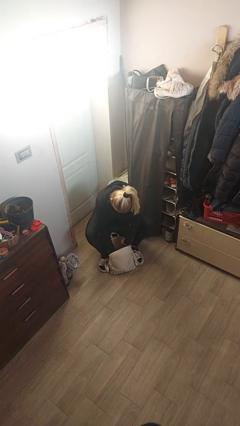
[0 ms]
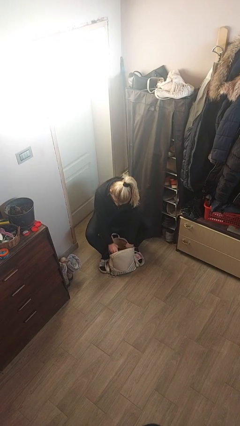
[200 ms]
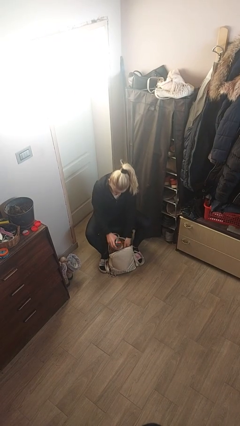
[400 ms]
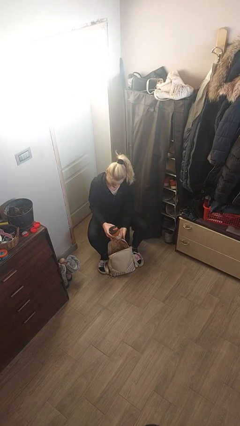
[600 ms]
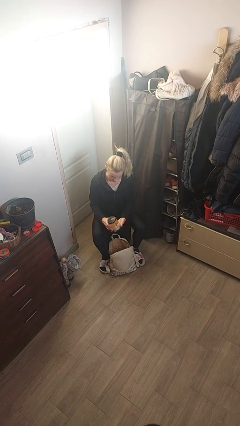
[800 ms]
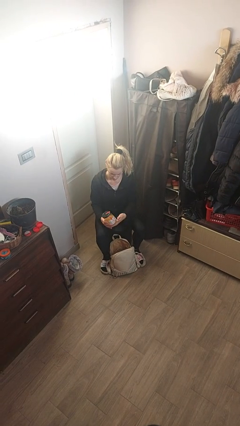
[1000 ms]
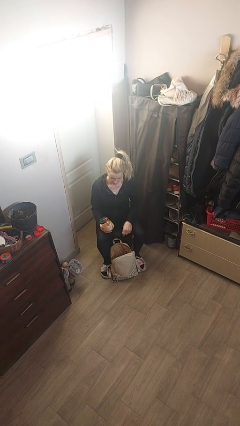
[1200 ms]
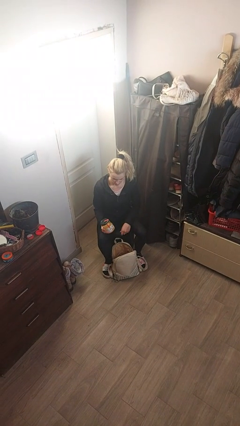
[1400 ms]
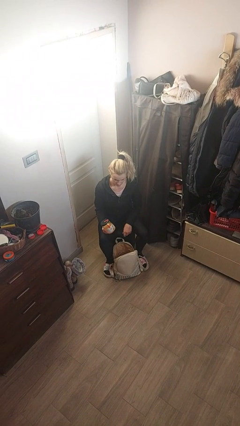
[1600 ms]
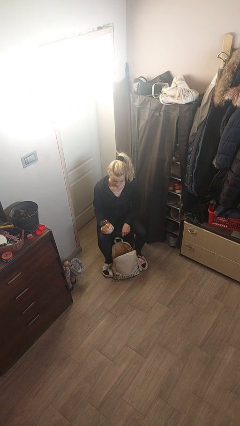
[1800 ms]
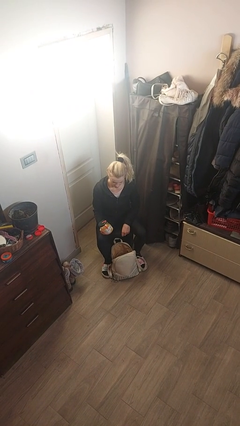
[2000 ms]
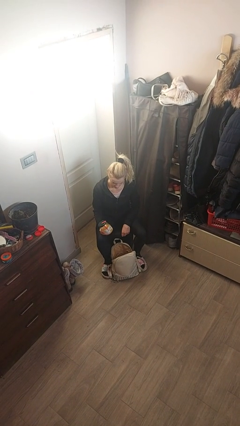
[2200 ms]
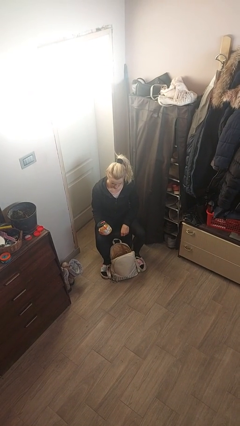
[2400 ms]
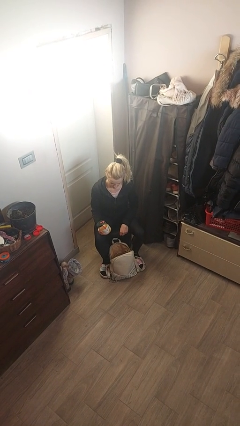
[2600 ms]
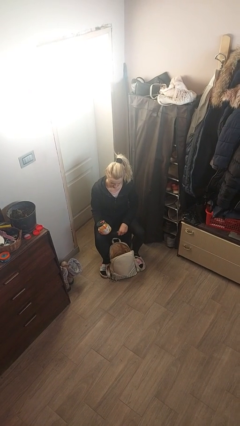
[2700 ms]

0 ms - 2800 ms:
person takes object from backpack

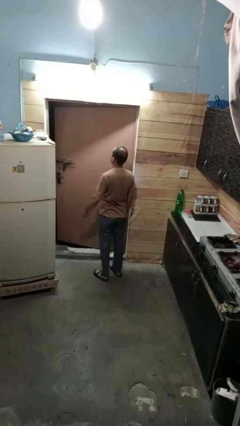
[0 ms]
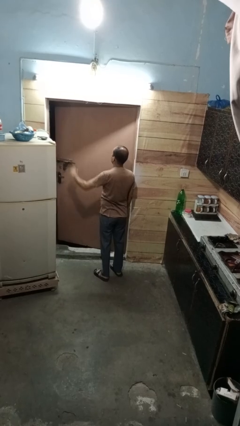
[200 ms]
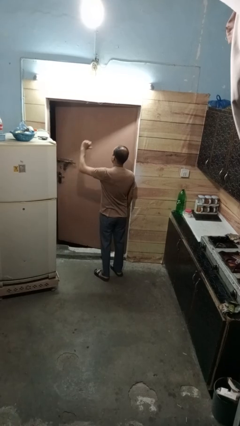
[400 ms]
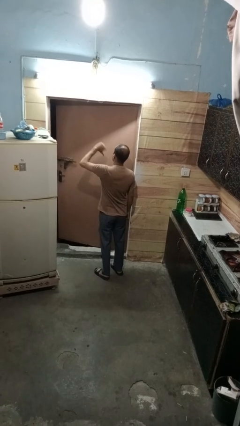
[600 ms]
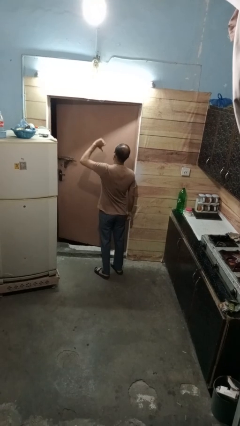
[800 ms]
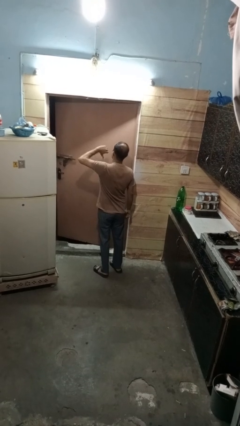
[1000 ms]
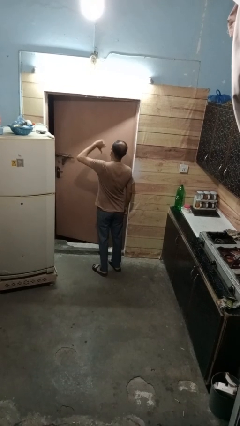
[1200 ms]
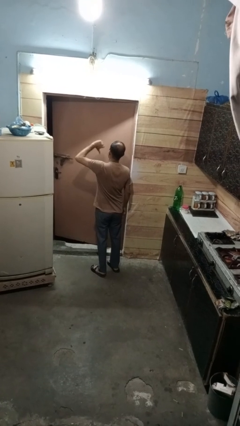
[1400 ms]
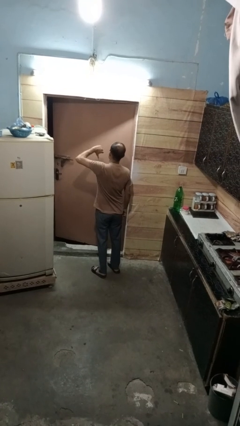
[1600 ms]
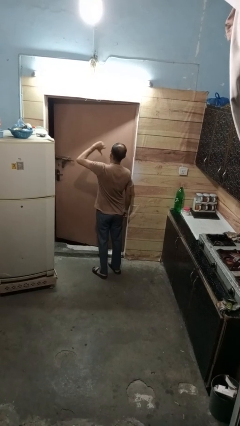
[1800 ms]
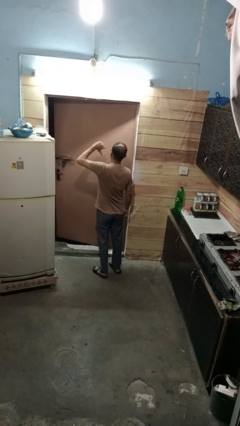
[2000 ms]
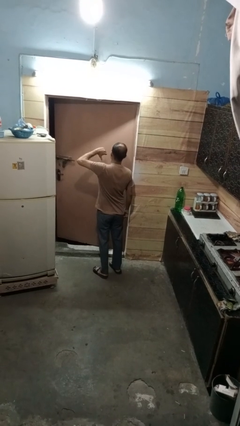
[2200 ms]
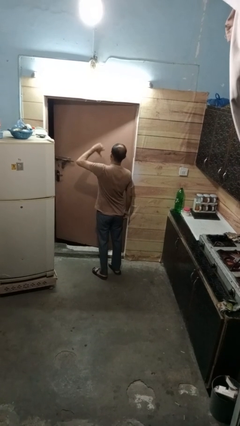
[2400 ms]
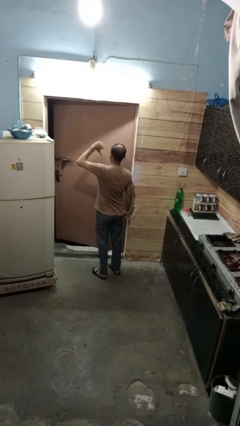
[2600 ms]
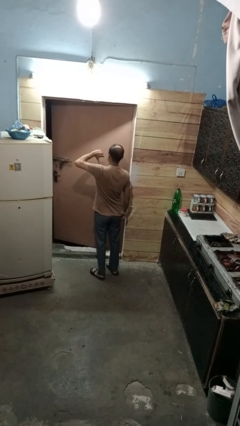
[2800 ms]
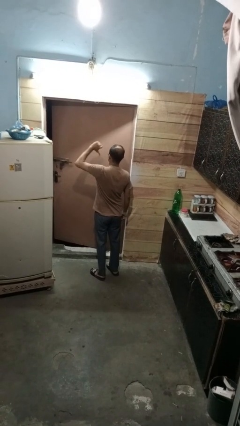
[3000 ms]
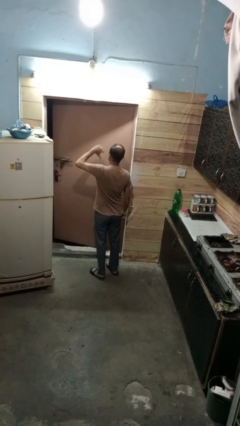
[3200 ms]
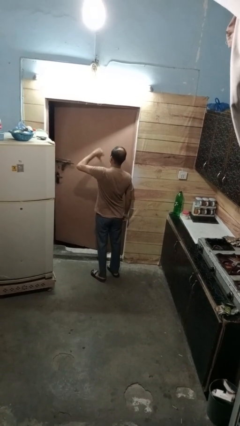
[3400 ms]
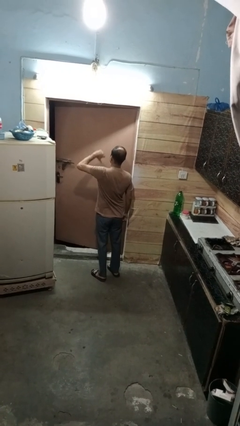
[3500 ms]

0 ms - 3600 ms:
person gestures hang loose

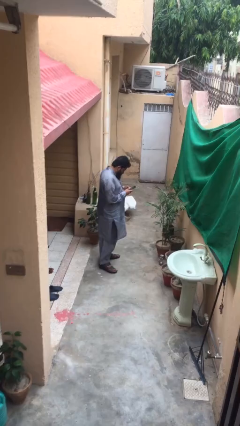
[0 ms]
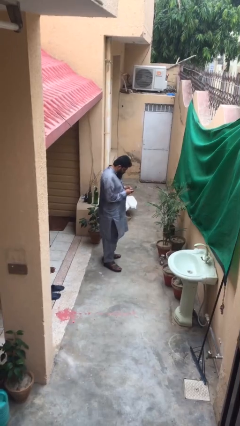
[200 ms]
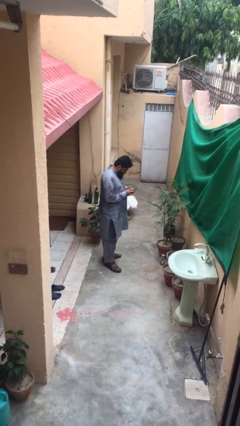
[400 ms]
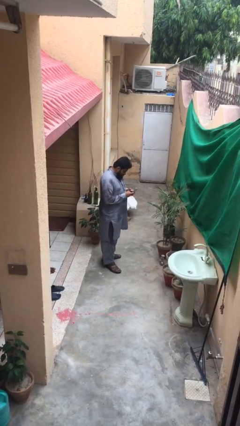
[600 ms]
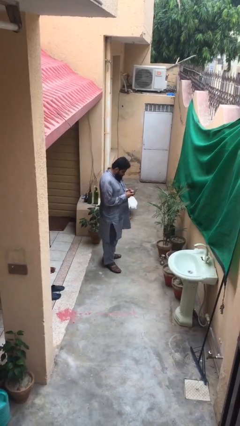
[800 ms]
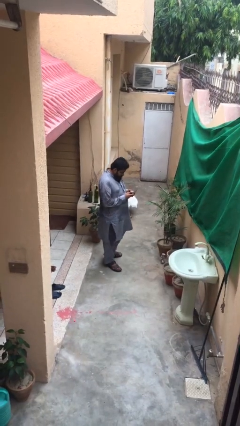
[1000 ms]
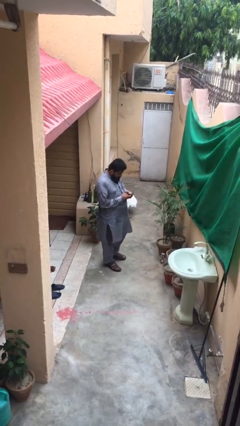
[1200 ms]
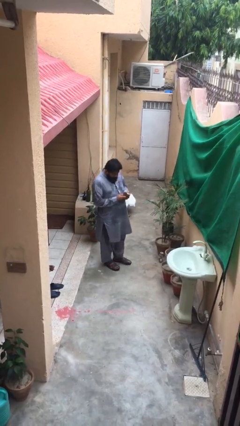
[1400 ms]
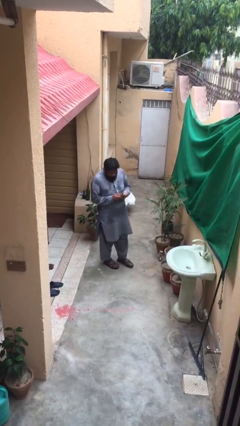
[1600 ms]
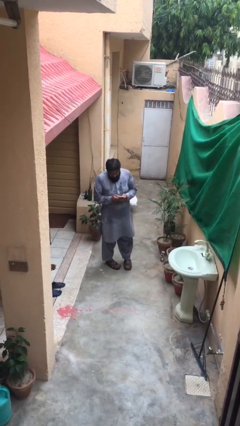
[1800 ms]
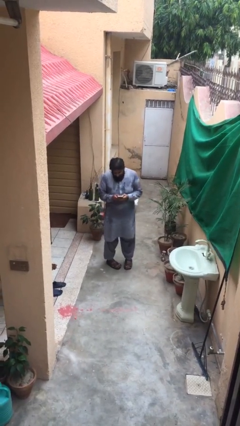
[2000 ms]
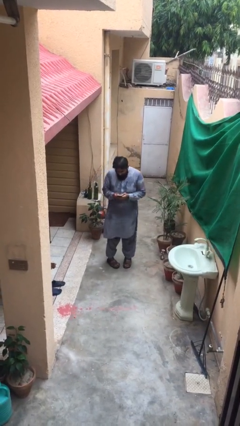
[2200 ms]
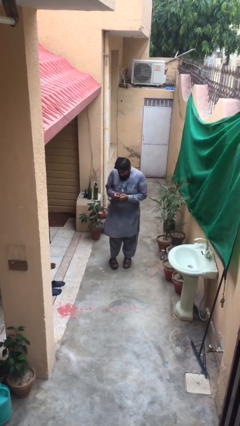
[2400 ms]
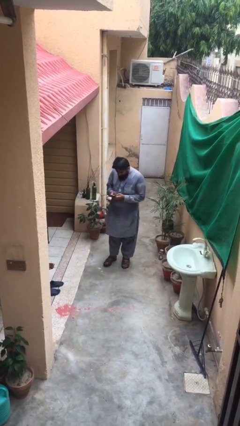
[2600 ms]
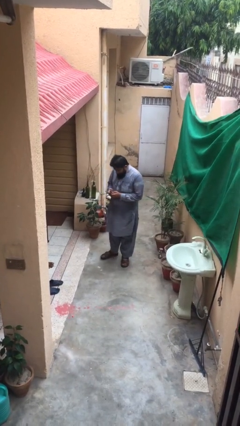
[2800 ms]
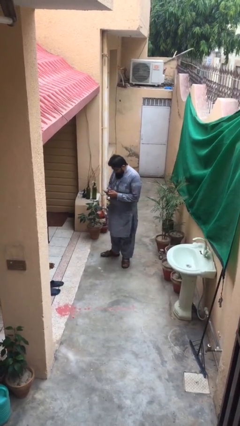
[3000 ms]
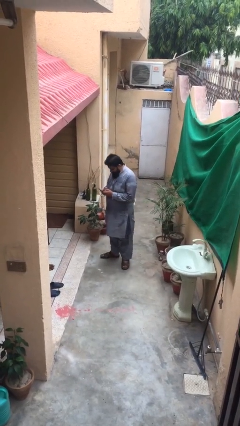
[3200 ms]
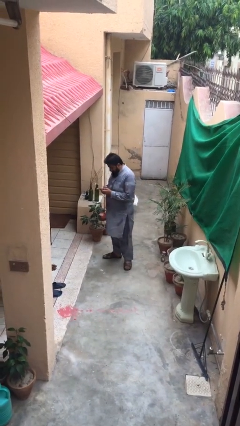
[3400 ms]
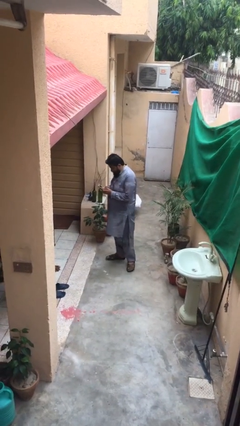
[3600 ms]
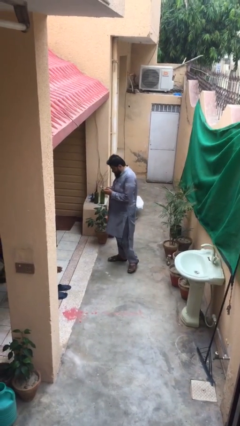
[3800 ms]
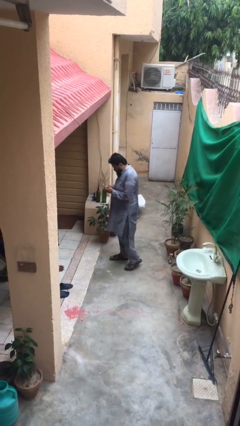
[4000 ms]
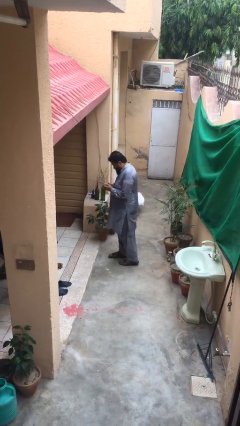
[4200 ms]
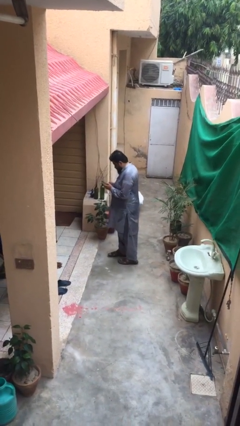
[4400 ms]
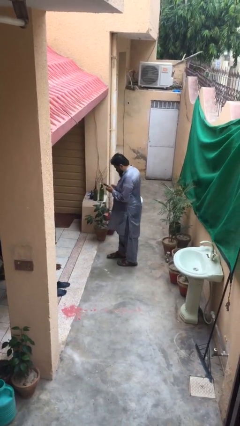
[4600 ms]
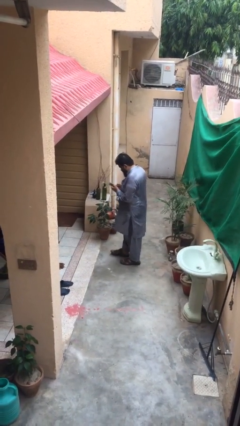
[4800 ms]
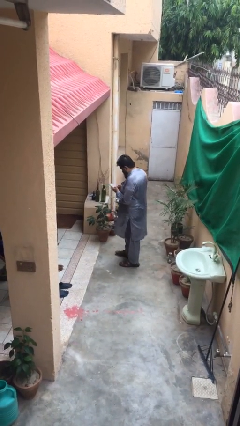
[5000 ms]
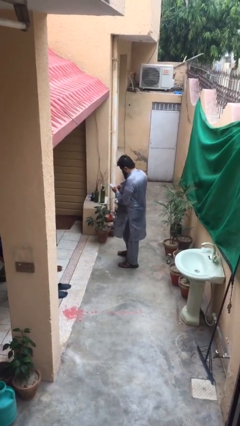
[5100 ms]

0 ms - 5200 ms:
person texts on phone

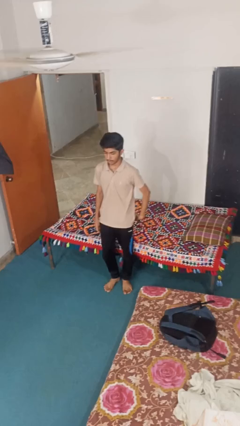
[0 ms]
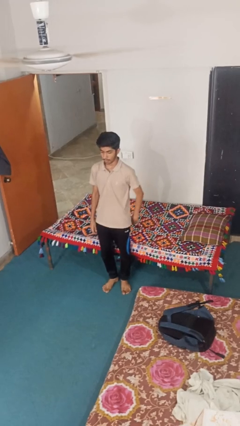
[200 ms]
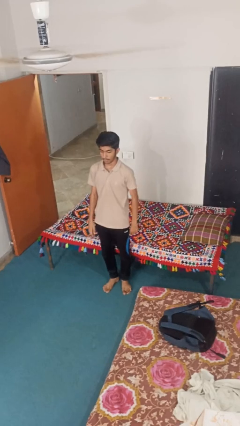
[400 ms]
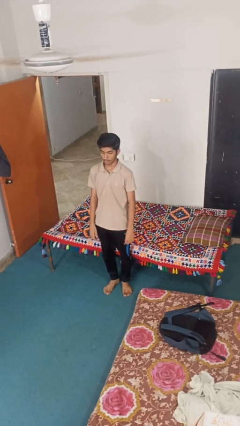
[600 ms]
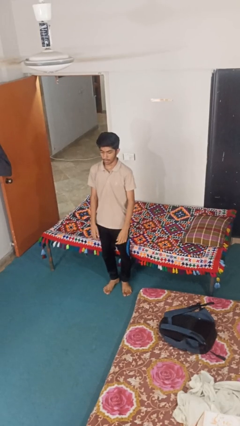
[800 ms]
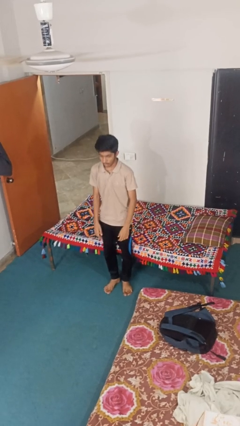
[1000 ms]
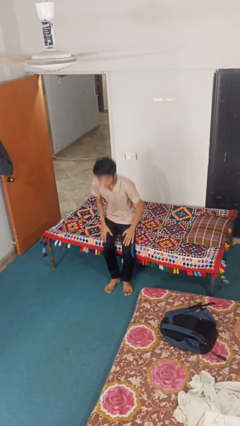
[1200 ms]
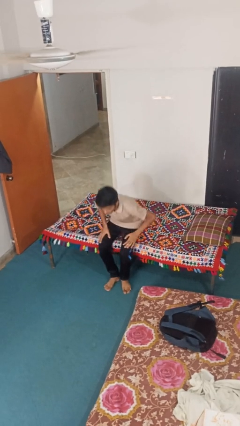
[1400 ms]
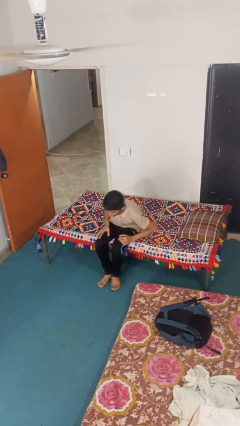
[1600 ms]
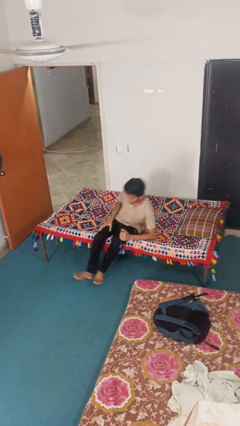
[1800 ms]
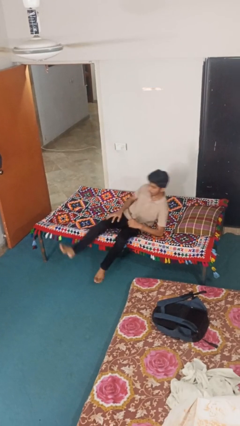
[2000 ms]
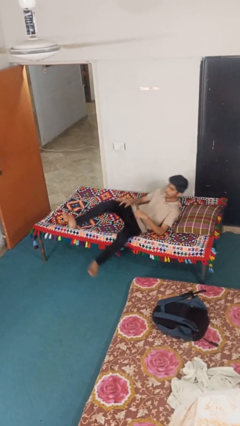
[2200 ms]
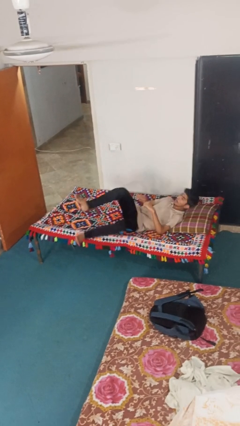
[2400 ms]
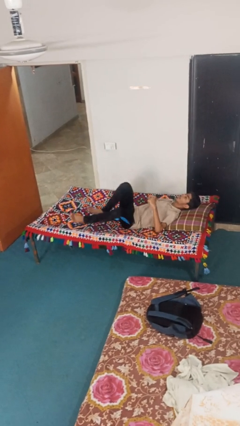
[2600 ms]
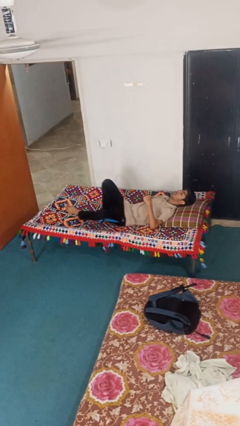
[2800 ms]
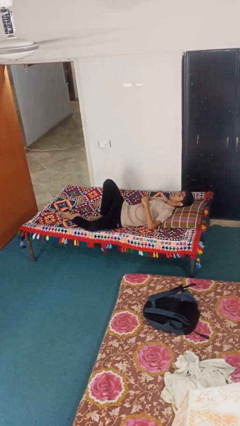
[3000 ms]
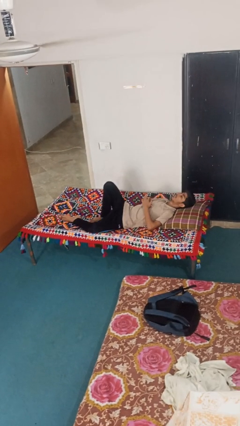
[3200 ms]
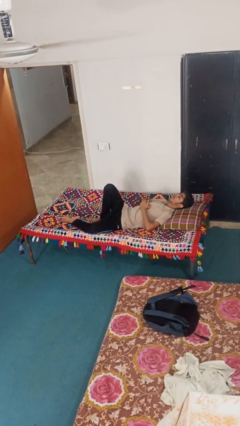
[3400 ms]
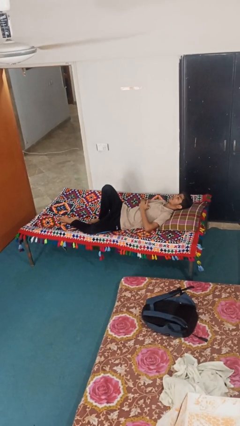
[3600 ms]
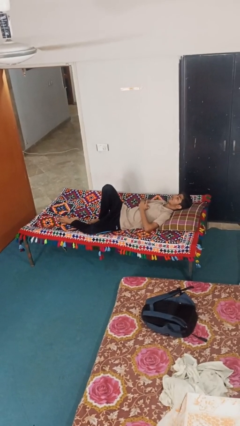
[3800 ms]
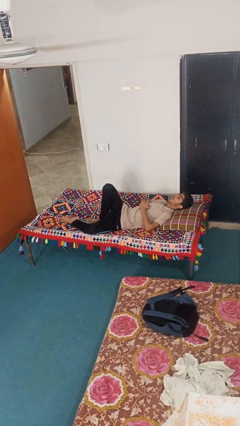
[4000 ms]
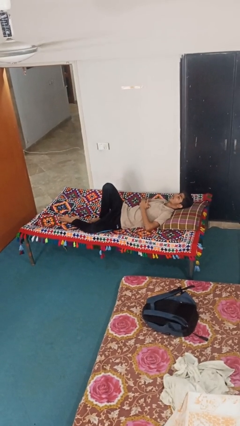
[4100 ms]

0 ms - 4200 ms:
person lies down on bed

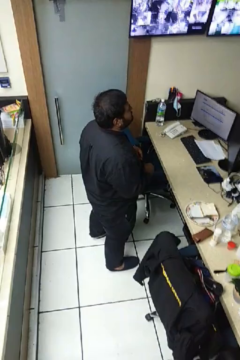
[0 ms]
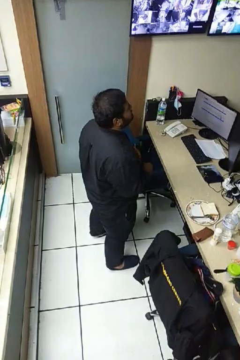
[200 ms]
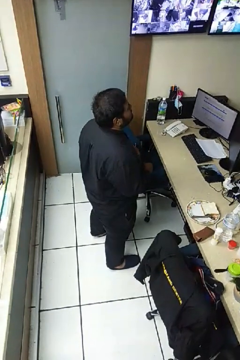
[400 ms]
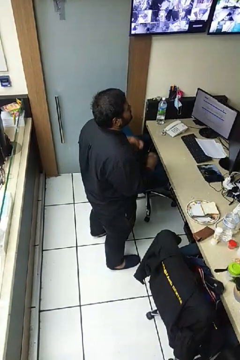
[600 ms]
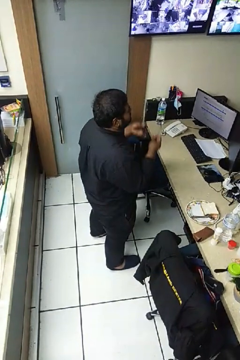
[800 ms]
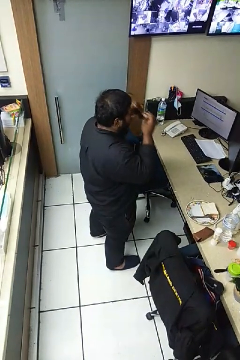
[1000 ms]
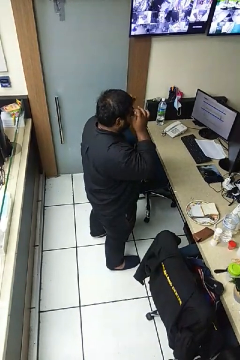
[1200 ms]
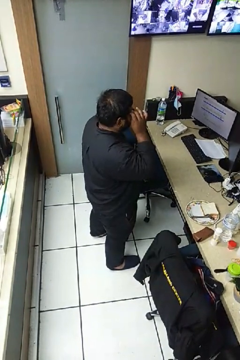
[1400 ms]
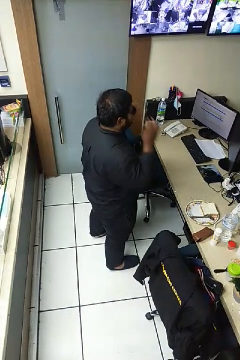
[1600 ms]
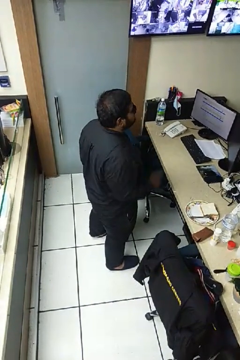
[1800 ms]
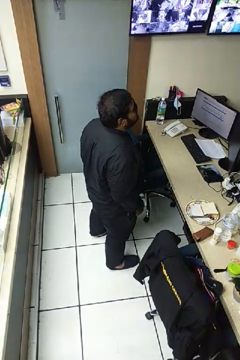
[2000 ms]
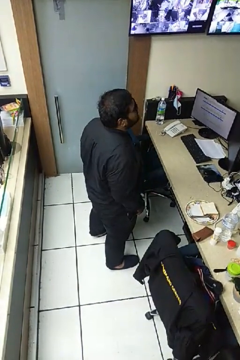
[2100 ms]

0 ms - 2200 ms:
person puts on sunglasses

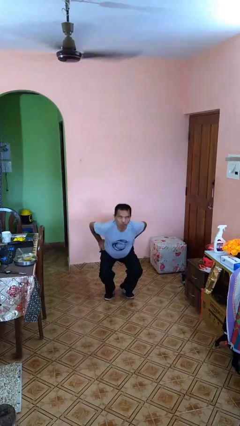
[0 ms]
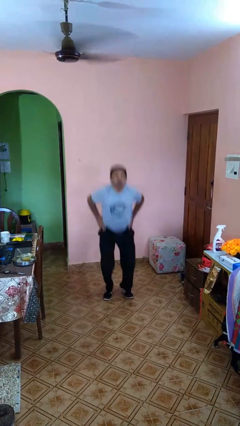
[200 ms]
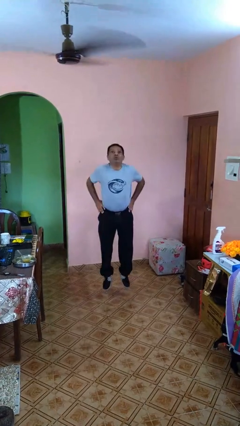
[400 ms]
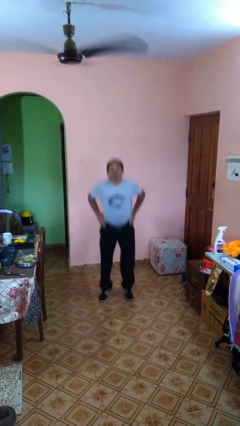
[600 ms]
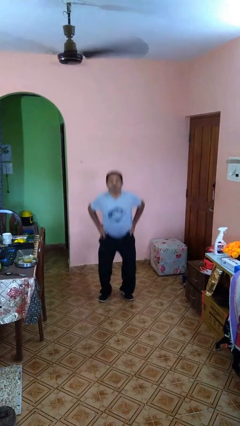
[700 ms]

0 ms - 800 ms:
person jumps
